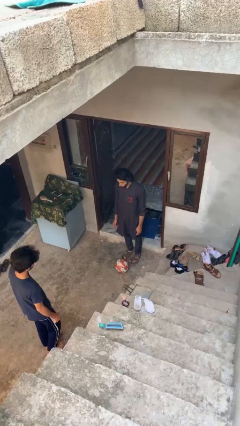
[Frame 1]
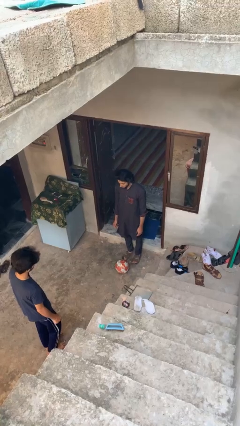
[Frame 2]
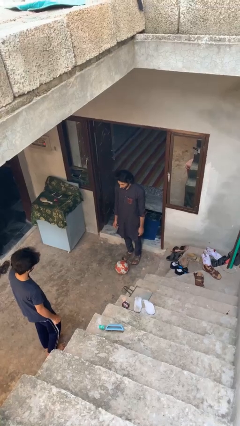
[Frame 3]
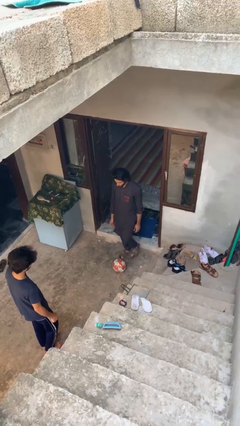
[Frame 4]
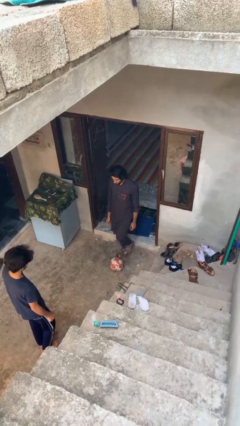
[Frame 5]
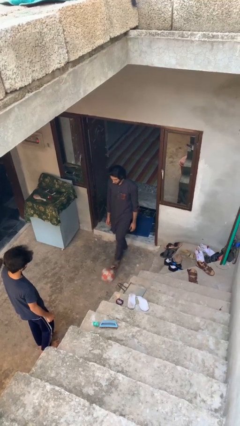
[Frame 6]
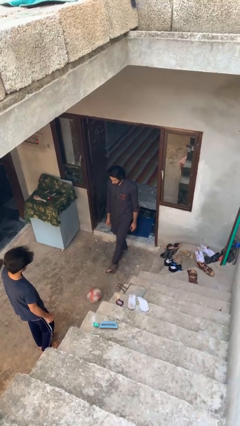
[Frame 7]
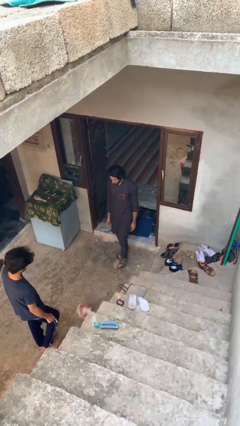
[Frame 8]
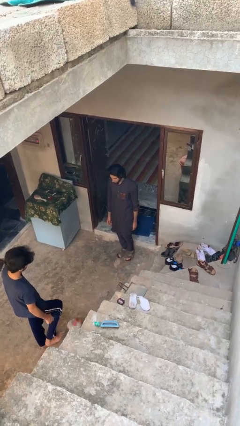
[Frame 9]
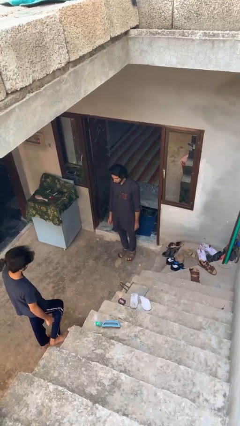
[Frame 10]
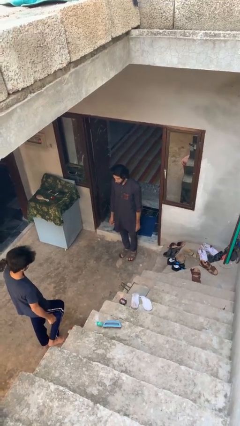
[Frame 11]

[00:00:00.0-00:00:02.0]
person kicks object to person

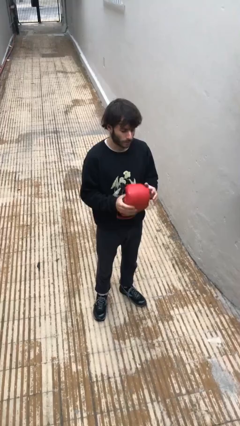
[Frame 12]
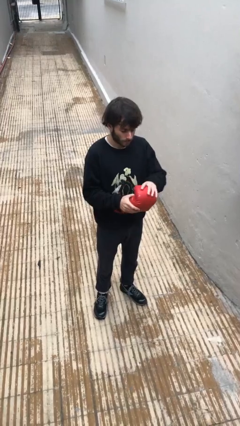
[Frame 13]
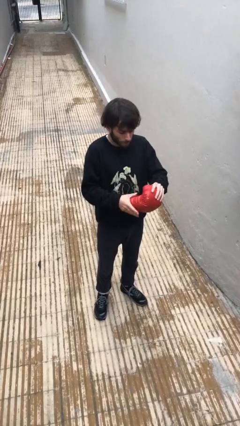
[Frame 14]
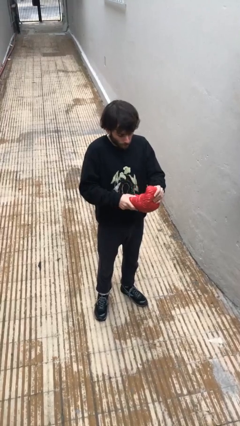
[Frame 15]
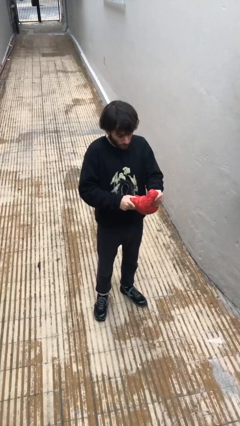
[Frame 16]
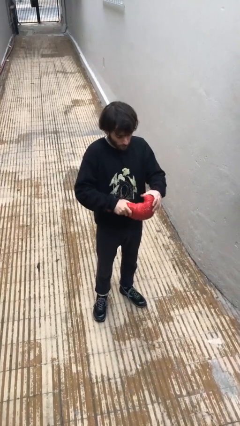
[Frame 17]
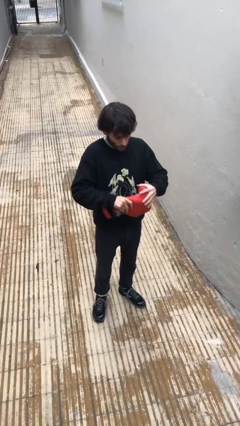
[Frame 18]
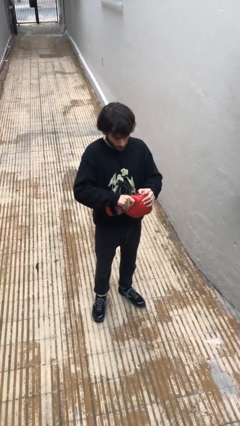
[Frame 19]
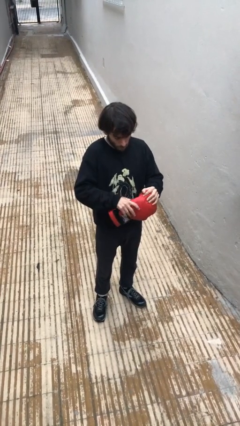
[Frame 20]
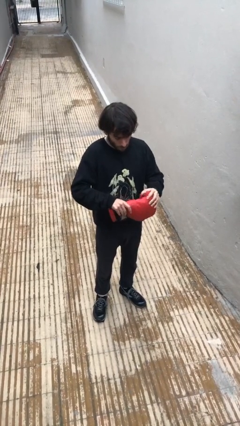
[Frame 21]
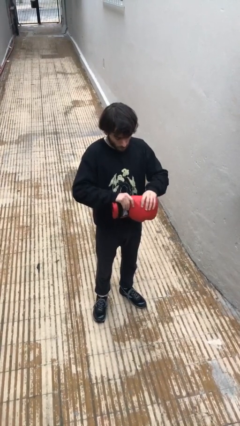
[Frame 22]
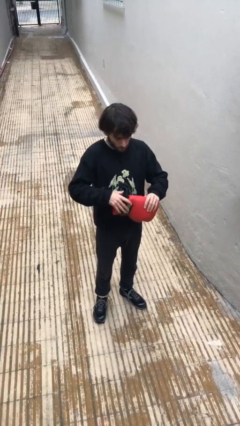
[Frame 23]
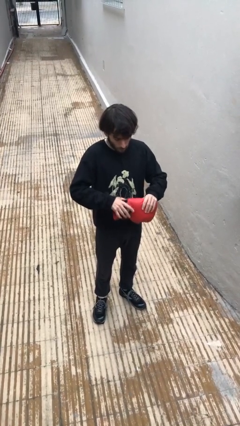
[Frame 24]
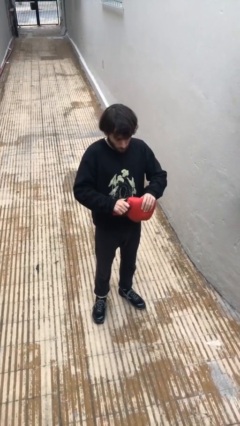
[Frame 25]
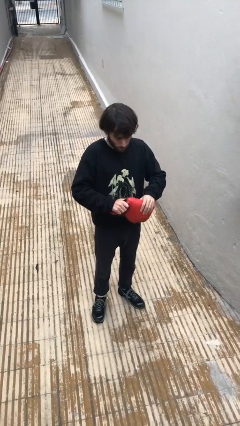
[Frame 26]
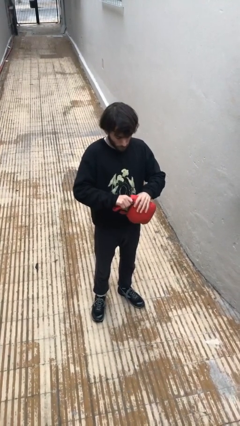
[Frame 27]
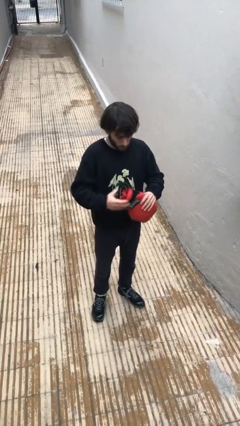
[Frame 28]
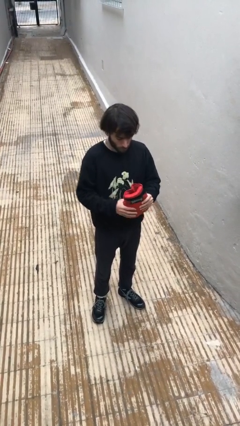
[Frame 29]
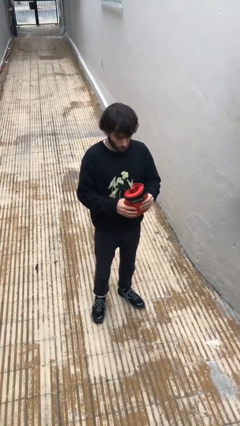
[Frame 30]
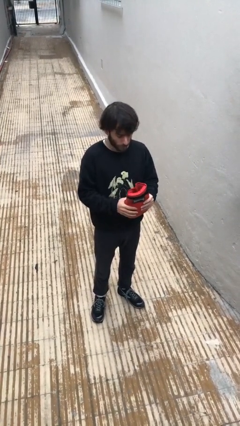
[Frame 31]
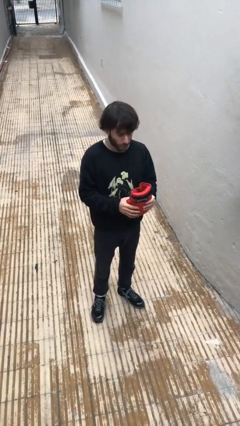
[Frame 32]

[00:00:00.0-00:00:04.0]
person squeezes object

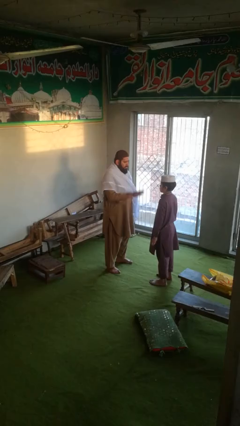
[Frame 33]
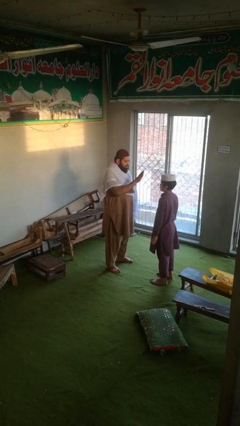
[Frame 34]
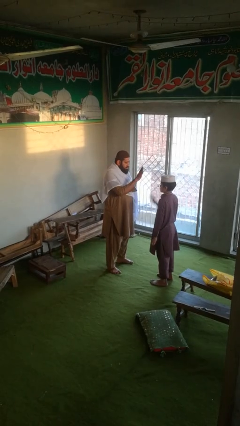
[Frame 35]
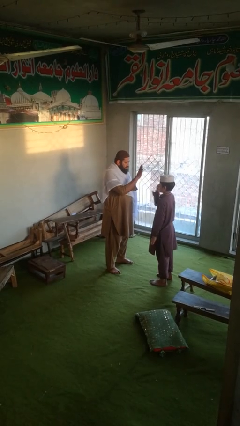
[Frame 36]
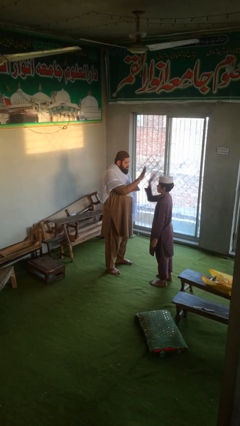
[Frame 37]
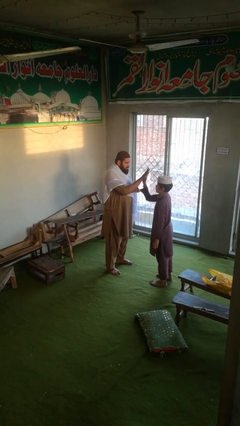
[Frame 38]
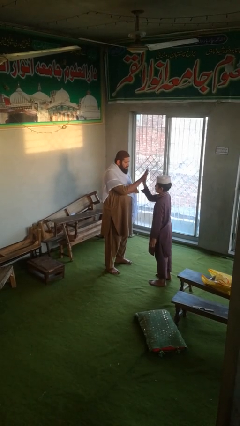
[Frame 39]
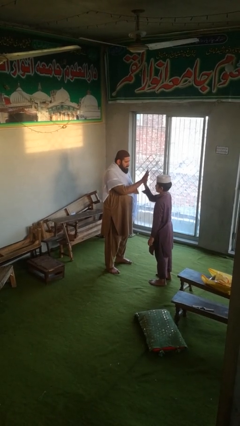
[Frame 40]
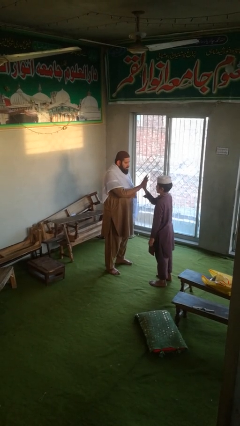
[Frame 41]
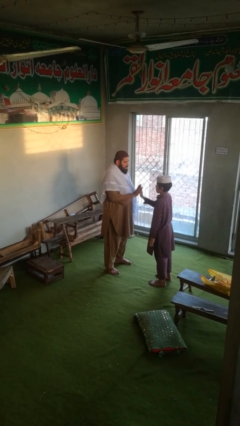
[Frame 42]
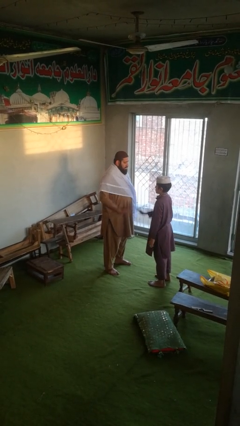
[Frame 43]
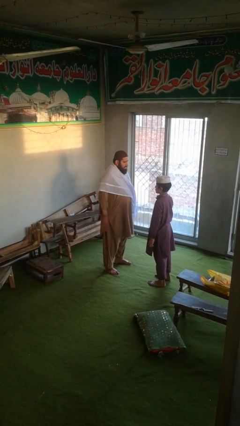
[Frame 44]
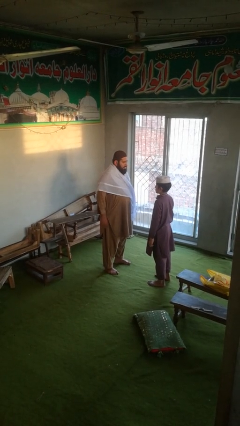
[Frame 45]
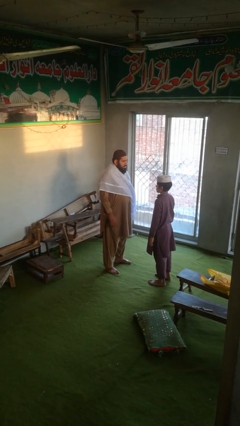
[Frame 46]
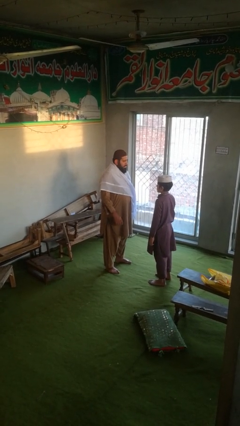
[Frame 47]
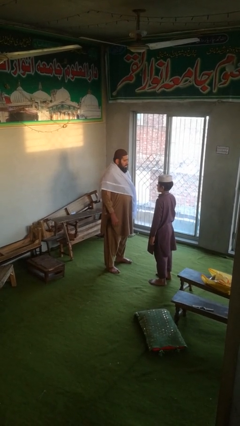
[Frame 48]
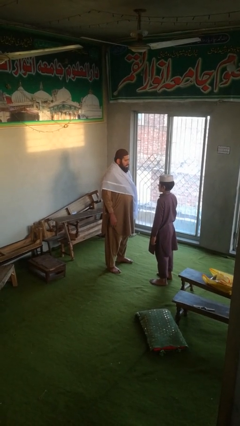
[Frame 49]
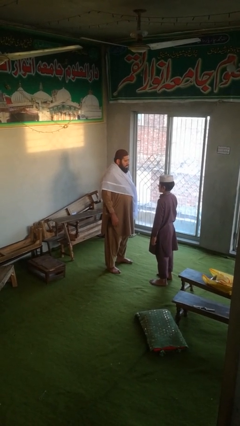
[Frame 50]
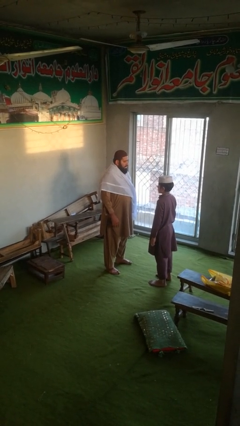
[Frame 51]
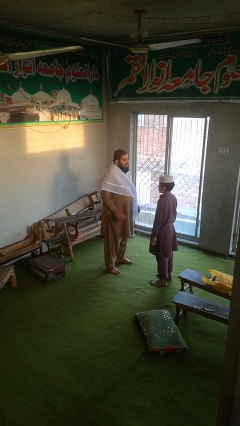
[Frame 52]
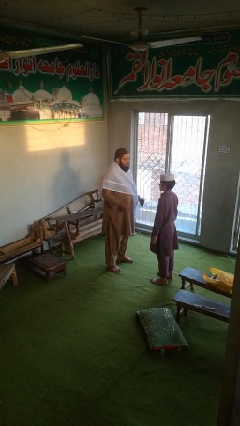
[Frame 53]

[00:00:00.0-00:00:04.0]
person highfives hand

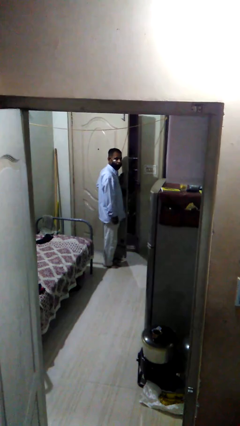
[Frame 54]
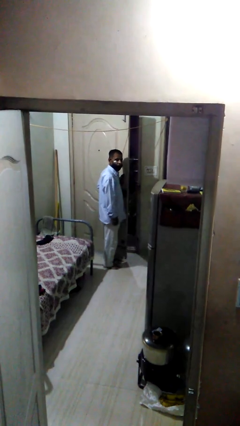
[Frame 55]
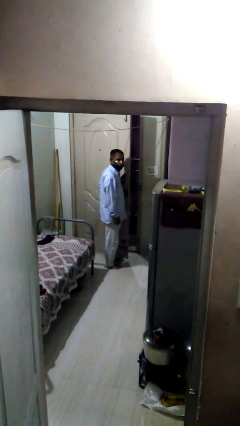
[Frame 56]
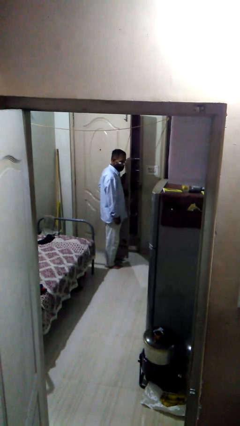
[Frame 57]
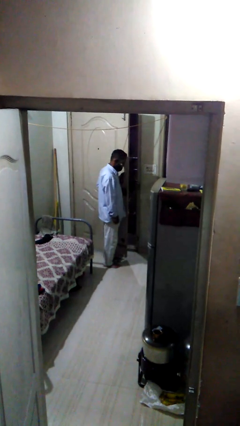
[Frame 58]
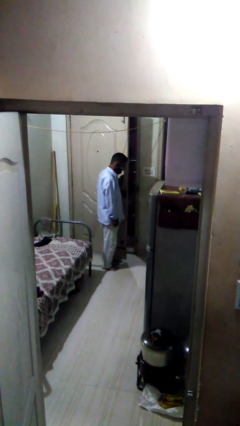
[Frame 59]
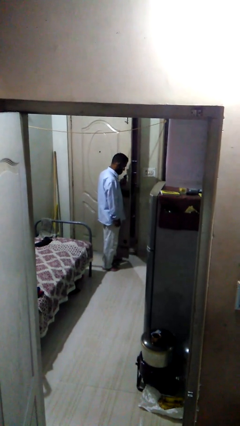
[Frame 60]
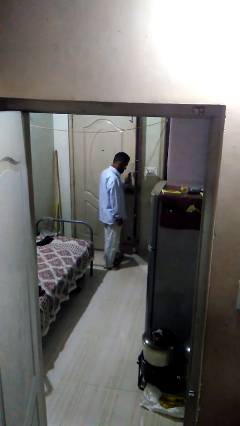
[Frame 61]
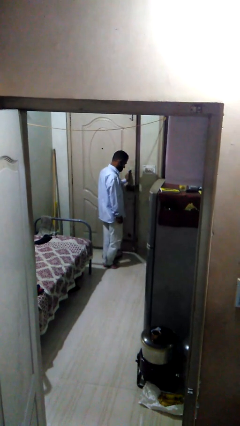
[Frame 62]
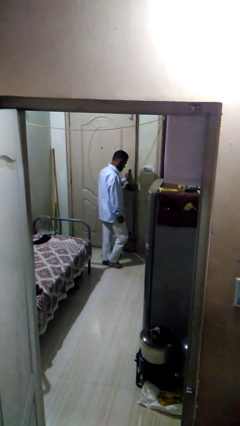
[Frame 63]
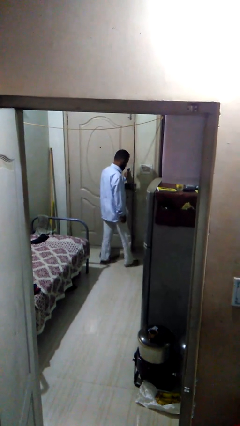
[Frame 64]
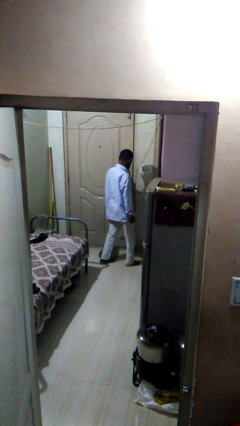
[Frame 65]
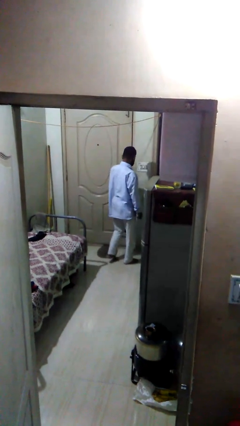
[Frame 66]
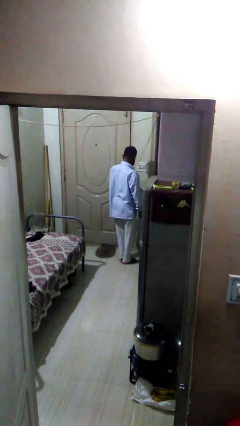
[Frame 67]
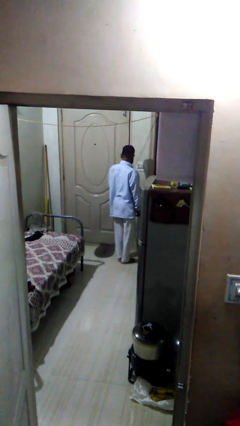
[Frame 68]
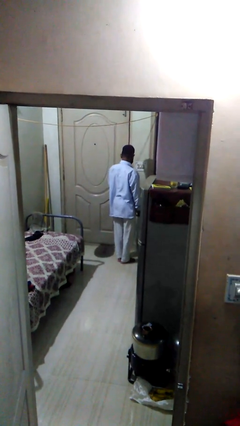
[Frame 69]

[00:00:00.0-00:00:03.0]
person closes facility door

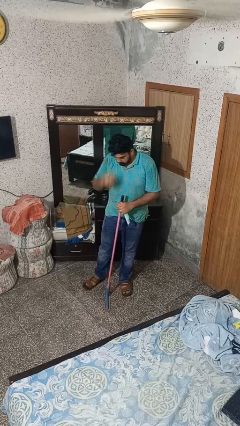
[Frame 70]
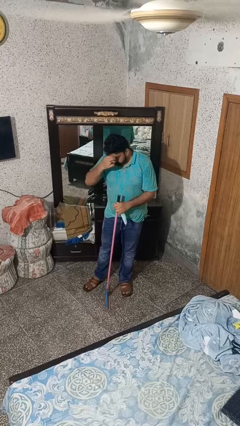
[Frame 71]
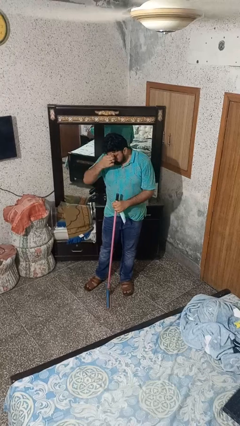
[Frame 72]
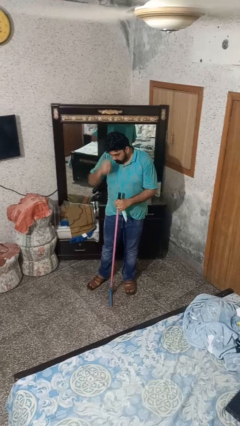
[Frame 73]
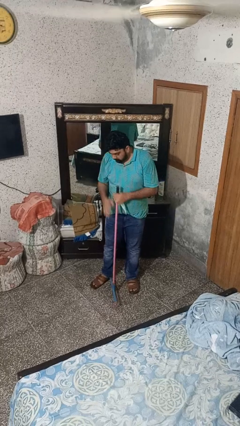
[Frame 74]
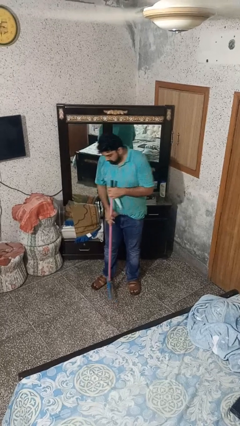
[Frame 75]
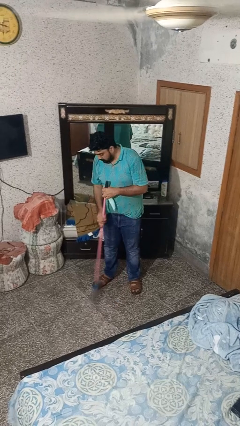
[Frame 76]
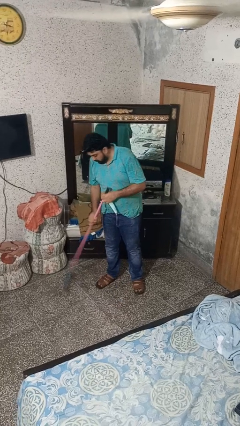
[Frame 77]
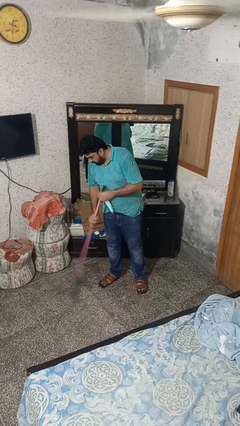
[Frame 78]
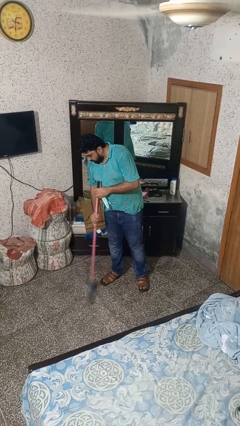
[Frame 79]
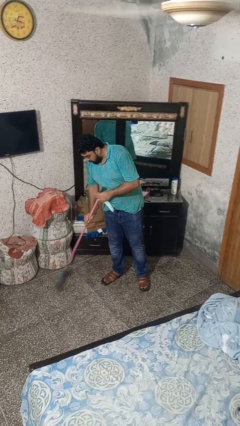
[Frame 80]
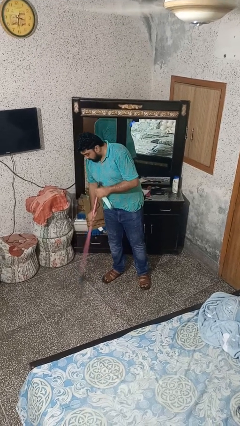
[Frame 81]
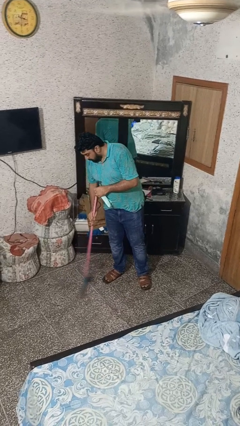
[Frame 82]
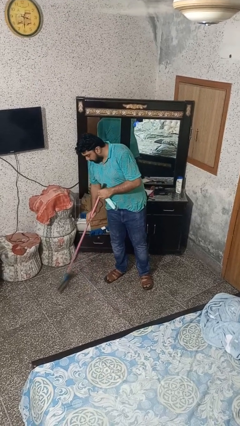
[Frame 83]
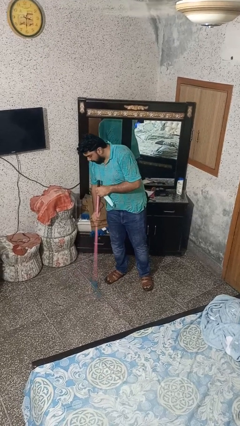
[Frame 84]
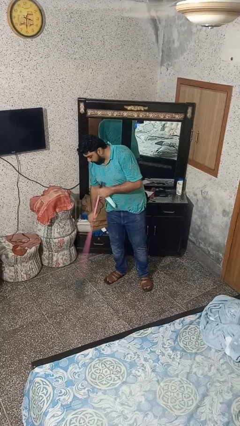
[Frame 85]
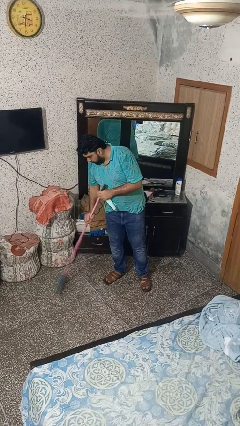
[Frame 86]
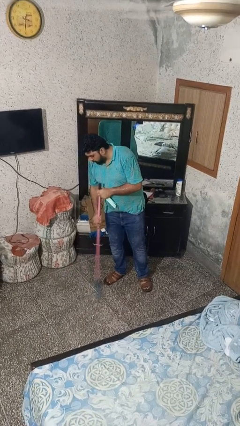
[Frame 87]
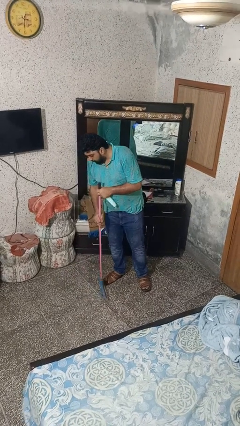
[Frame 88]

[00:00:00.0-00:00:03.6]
person sweeps floor

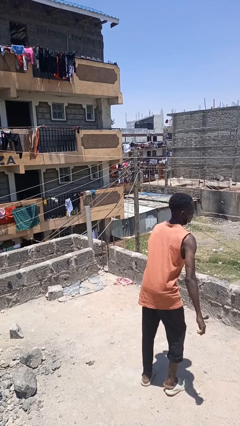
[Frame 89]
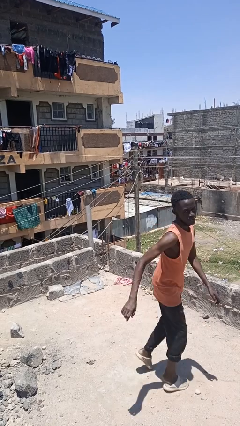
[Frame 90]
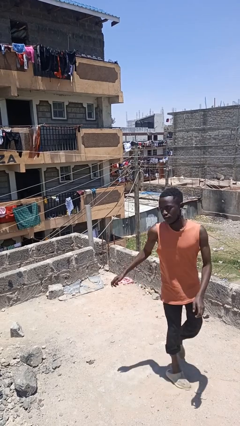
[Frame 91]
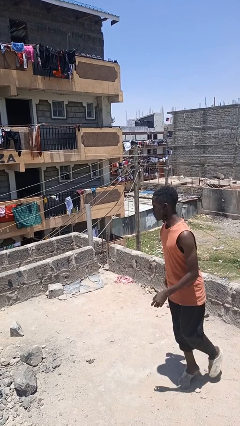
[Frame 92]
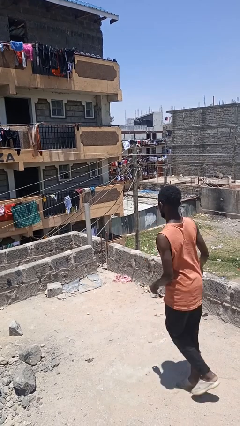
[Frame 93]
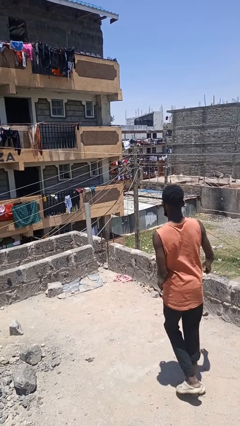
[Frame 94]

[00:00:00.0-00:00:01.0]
person twirls
